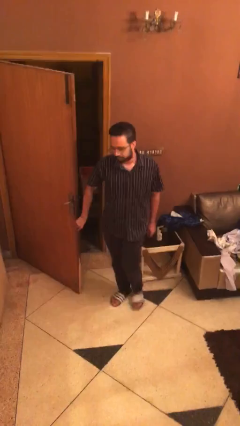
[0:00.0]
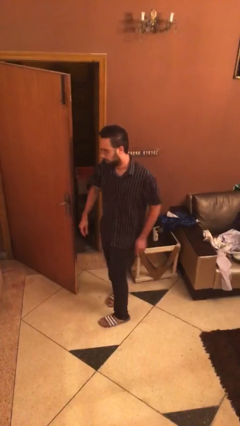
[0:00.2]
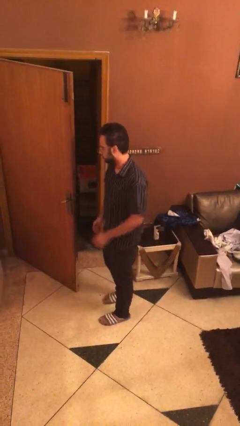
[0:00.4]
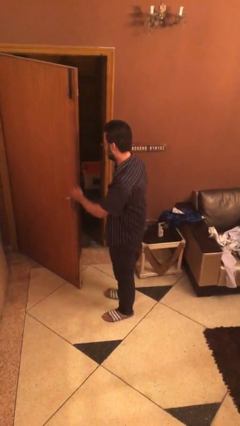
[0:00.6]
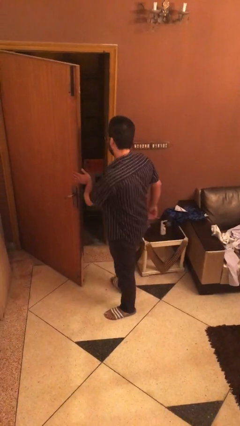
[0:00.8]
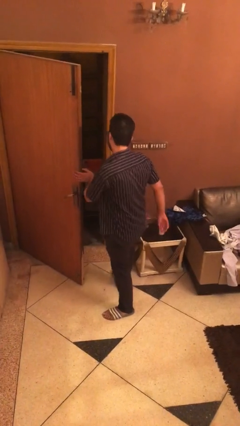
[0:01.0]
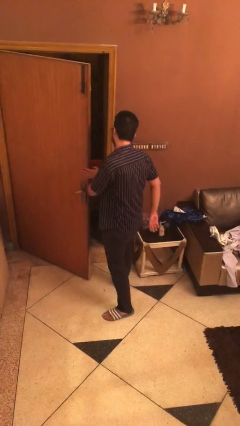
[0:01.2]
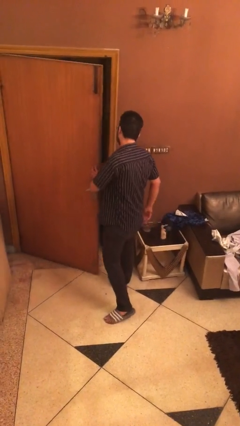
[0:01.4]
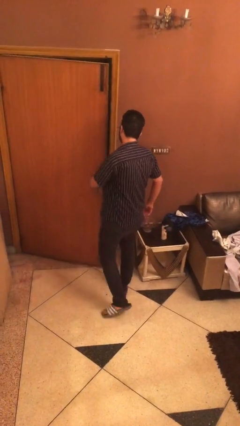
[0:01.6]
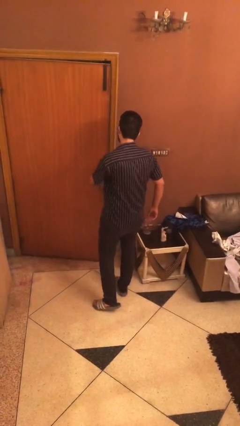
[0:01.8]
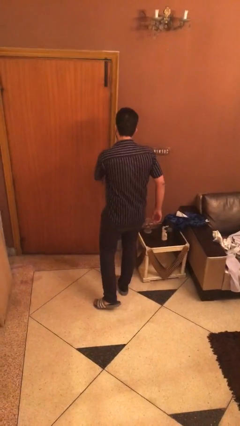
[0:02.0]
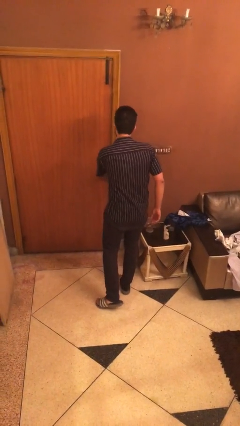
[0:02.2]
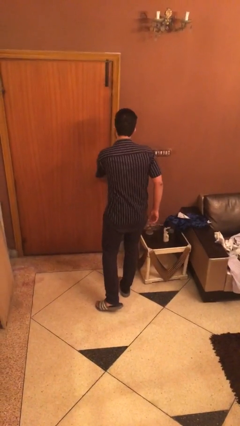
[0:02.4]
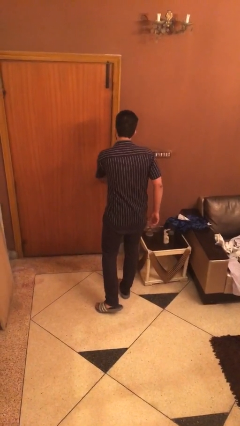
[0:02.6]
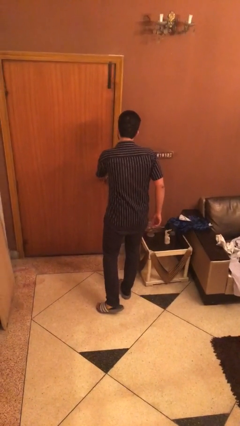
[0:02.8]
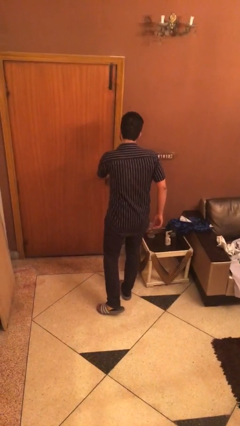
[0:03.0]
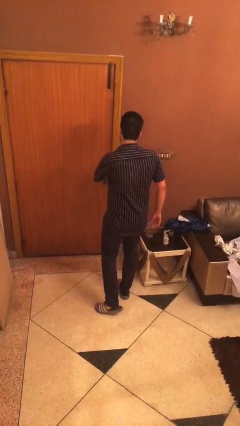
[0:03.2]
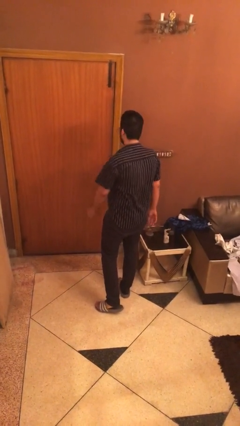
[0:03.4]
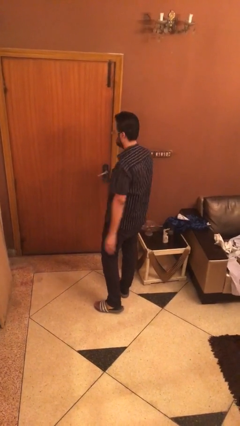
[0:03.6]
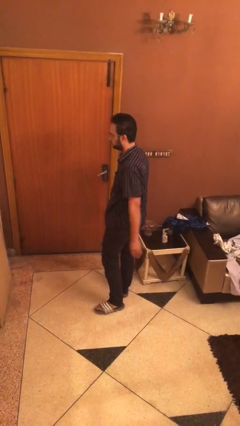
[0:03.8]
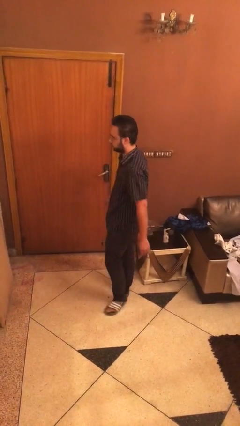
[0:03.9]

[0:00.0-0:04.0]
person closes facility door

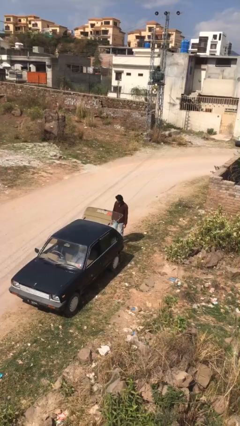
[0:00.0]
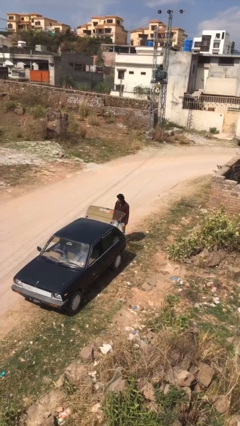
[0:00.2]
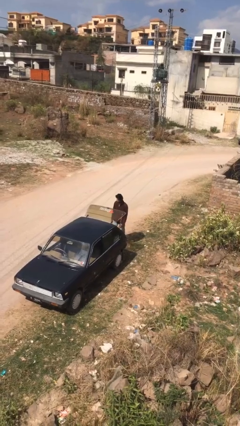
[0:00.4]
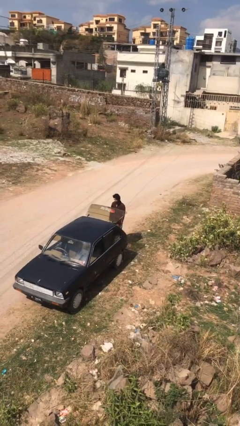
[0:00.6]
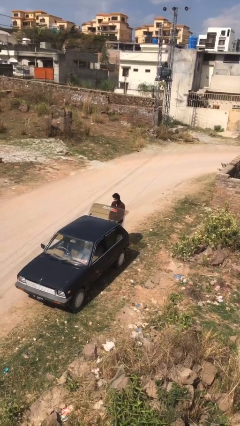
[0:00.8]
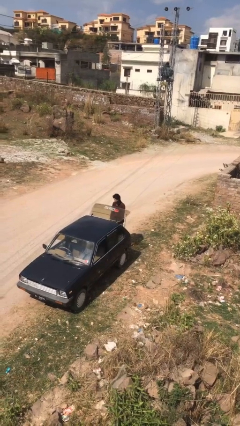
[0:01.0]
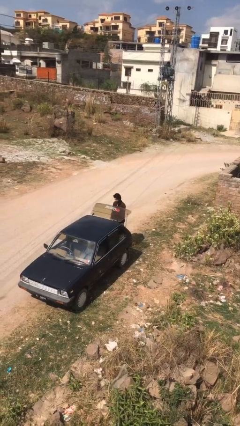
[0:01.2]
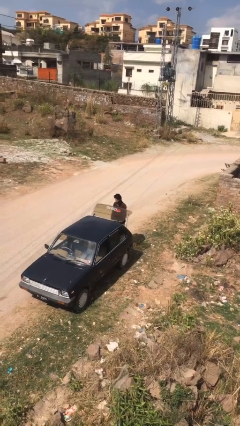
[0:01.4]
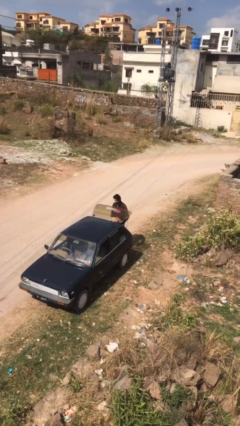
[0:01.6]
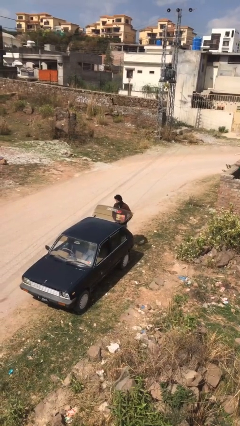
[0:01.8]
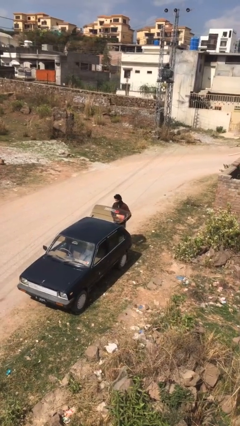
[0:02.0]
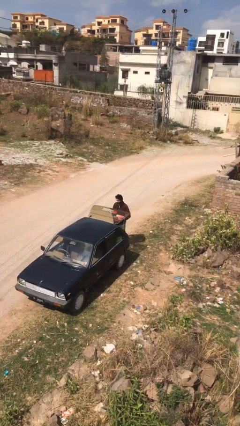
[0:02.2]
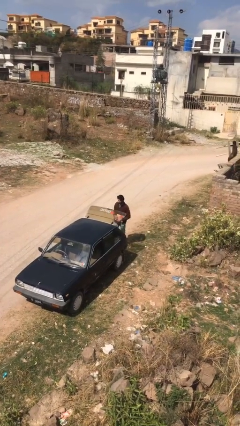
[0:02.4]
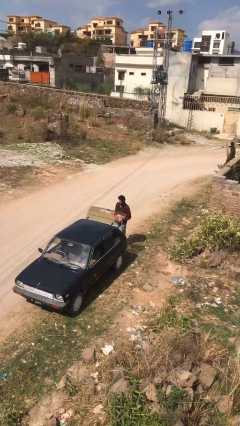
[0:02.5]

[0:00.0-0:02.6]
person unloads car

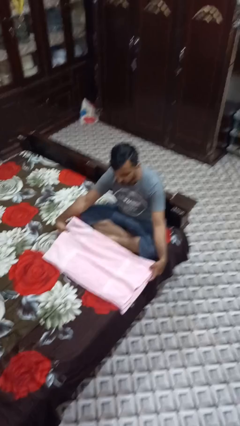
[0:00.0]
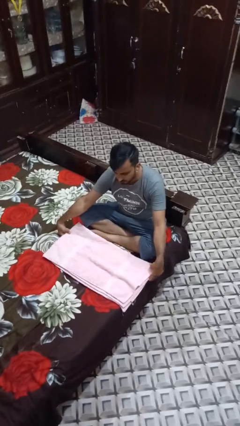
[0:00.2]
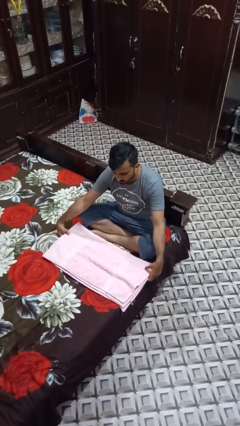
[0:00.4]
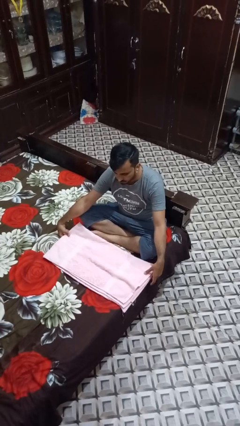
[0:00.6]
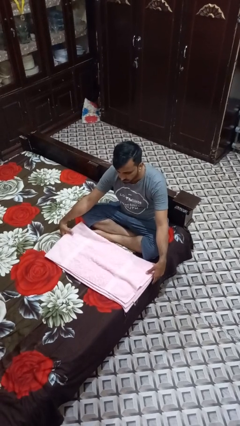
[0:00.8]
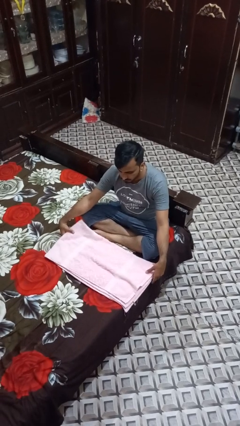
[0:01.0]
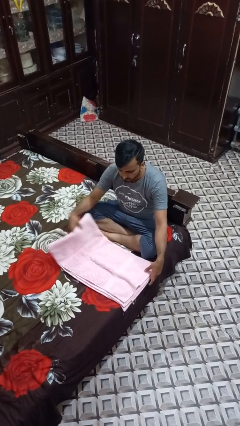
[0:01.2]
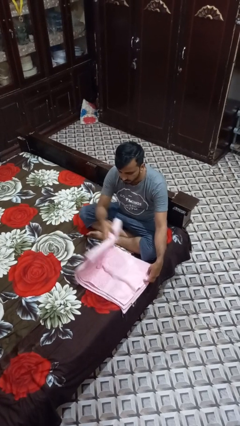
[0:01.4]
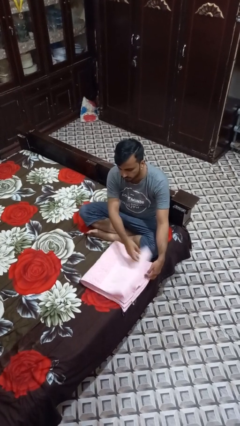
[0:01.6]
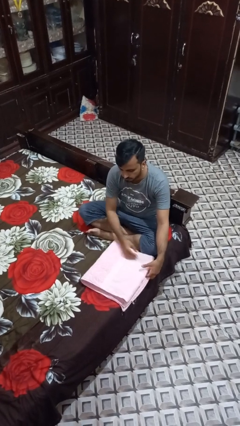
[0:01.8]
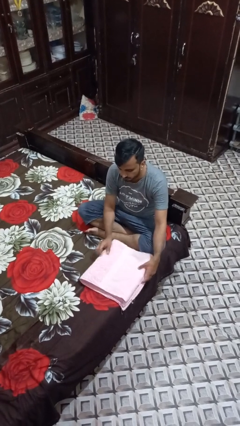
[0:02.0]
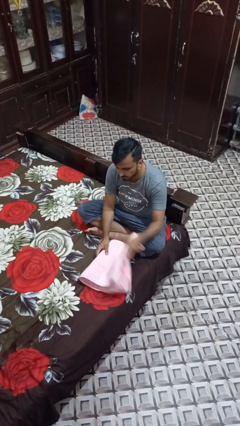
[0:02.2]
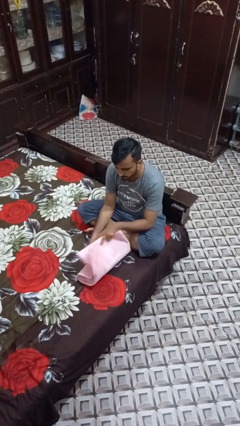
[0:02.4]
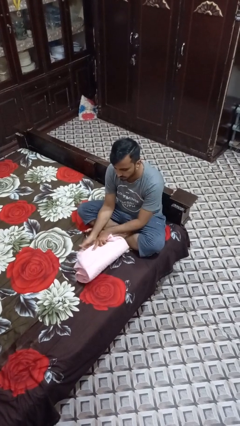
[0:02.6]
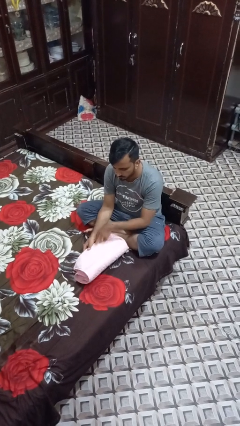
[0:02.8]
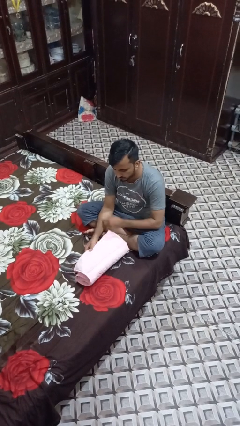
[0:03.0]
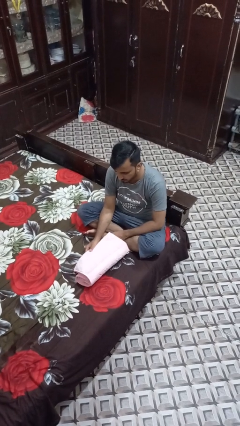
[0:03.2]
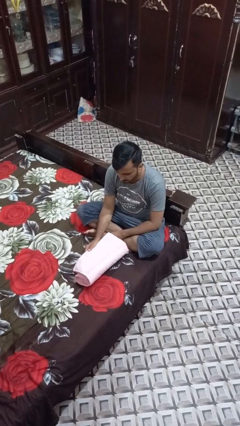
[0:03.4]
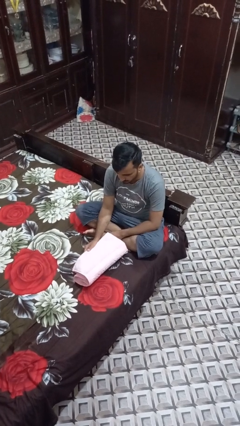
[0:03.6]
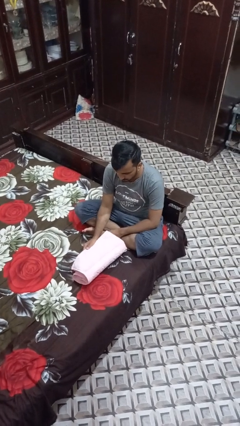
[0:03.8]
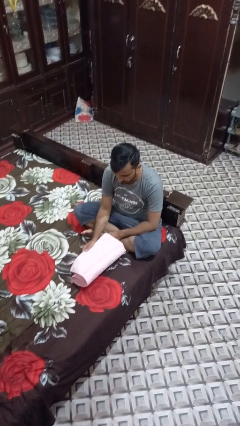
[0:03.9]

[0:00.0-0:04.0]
person folds towel

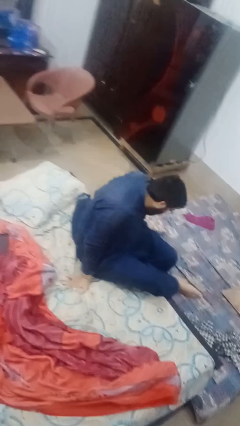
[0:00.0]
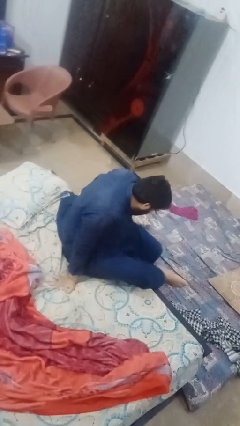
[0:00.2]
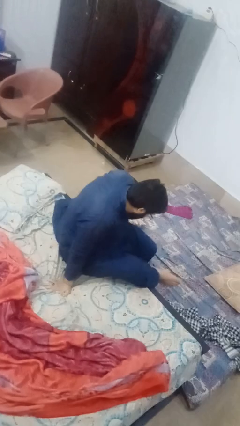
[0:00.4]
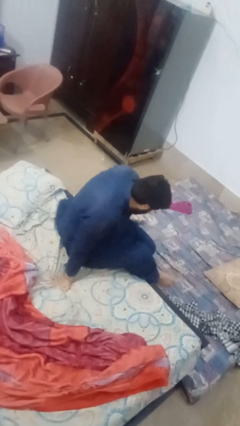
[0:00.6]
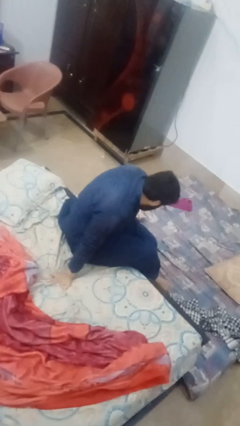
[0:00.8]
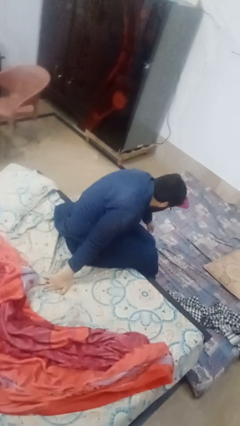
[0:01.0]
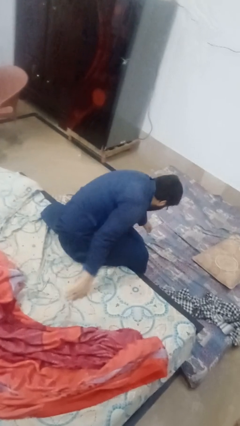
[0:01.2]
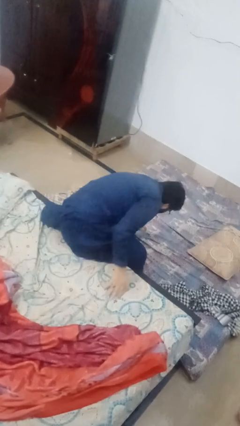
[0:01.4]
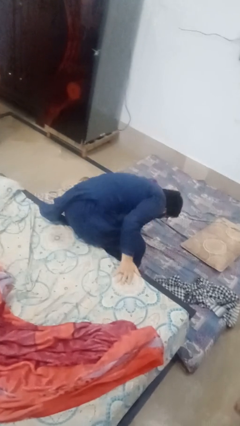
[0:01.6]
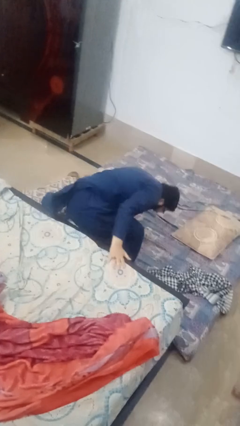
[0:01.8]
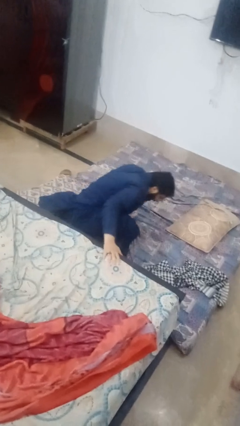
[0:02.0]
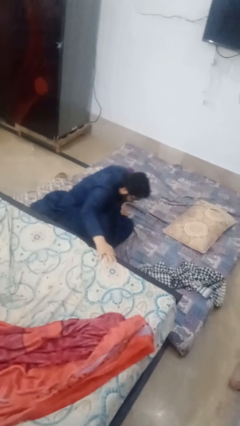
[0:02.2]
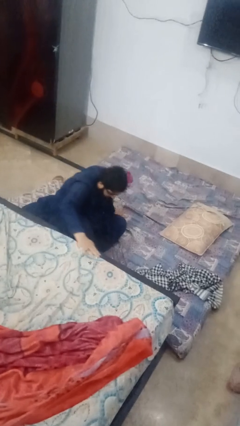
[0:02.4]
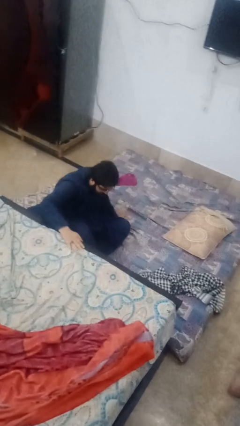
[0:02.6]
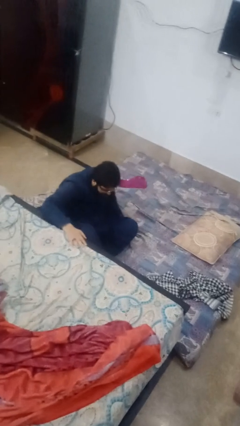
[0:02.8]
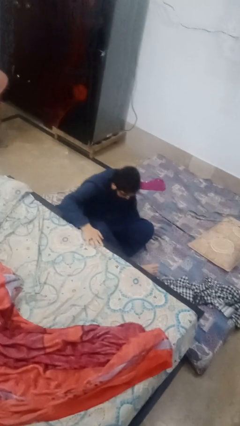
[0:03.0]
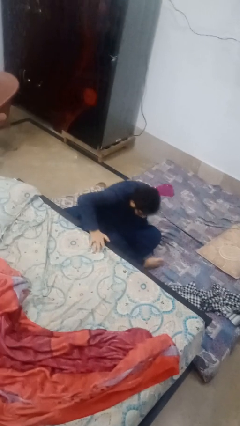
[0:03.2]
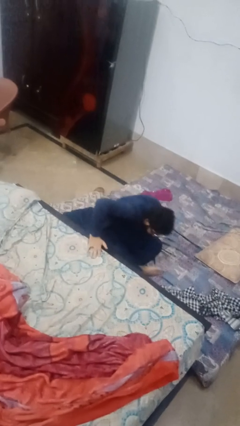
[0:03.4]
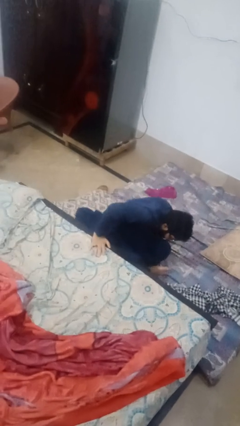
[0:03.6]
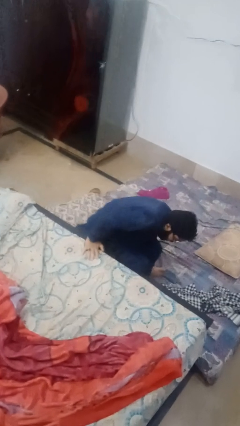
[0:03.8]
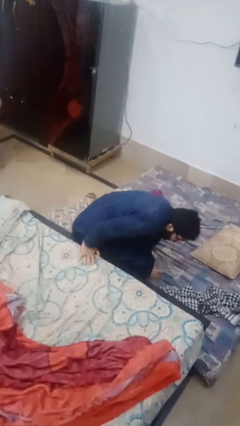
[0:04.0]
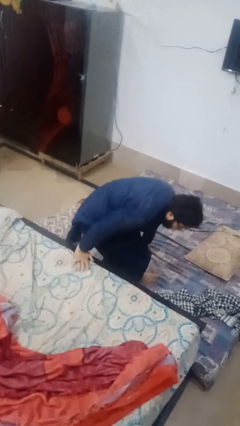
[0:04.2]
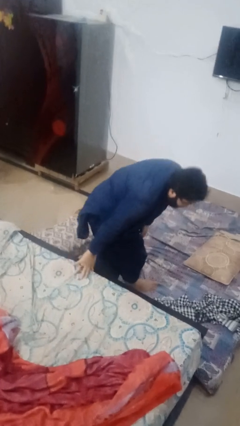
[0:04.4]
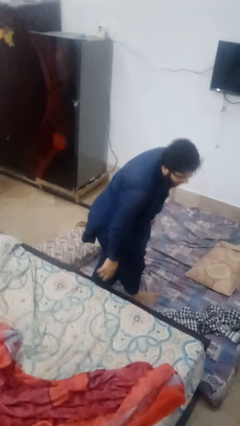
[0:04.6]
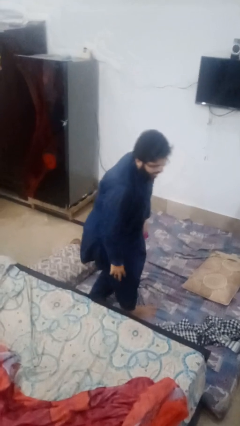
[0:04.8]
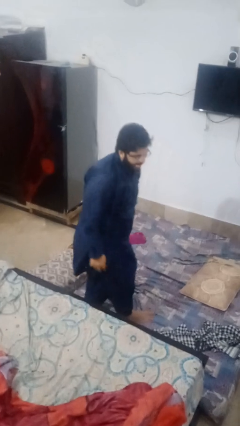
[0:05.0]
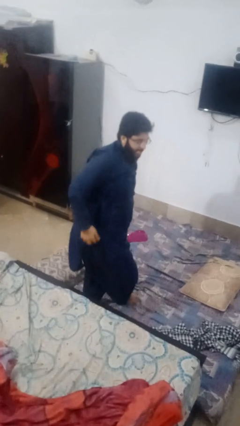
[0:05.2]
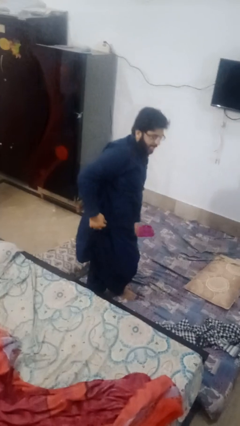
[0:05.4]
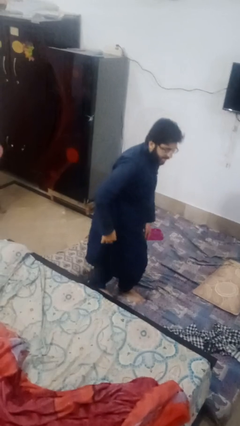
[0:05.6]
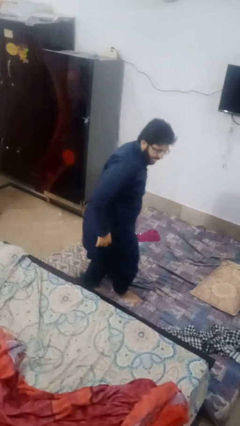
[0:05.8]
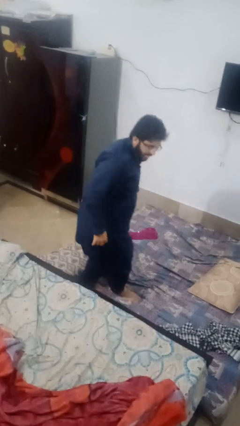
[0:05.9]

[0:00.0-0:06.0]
person falls from bed

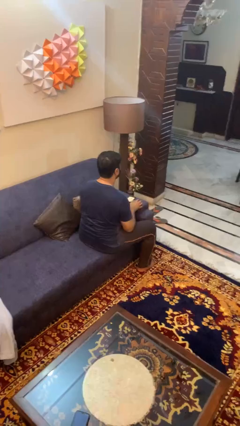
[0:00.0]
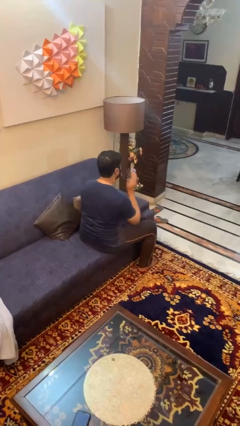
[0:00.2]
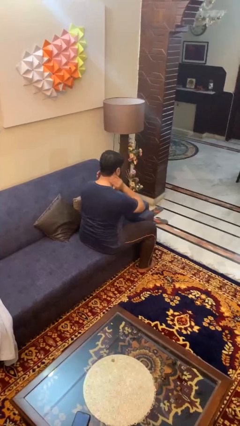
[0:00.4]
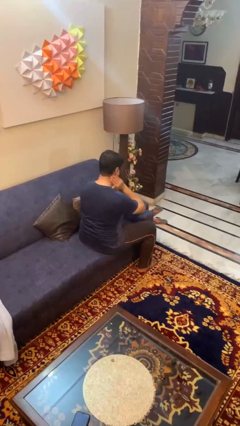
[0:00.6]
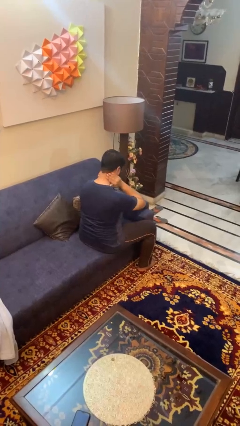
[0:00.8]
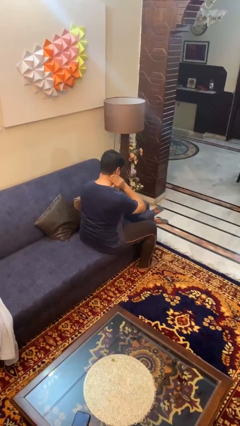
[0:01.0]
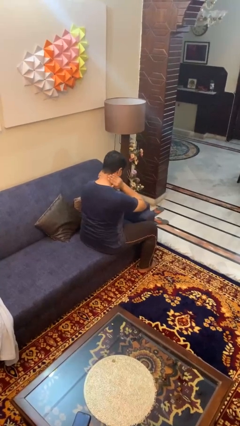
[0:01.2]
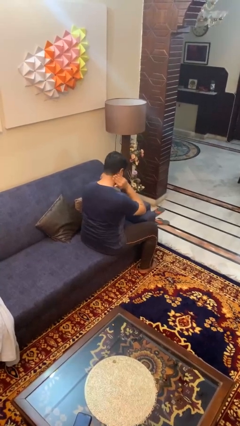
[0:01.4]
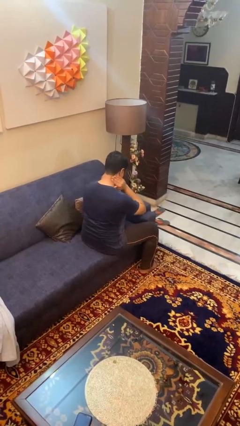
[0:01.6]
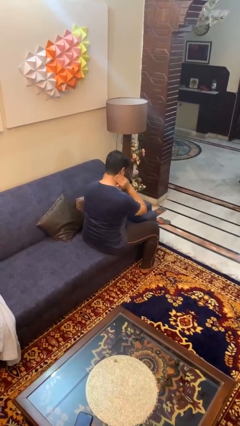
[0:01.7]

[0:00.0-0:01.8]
person rubs neck
